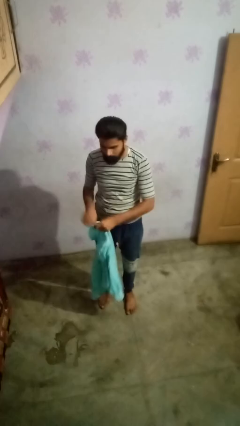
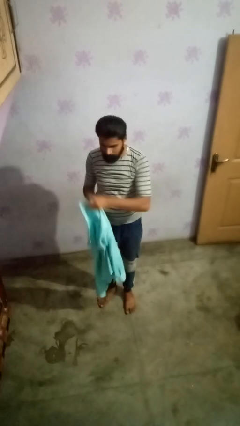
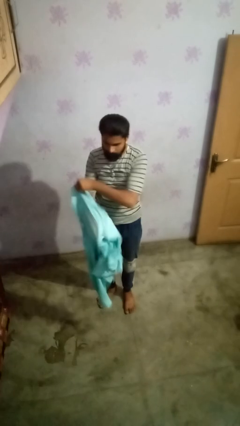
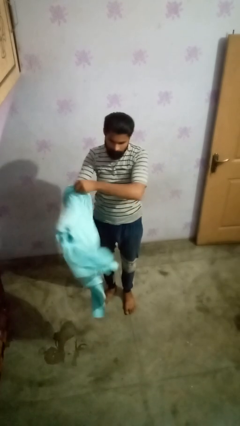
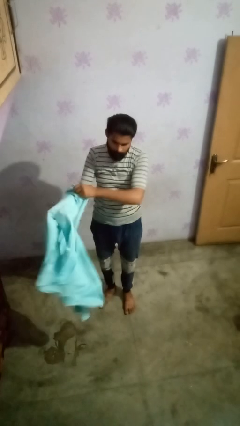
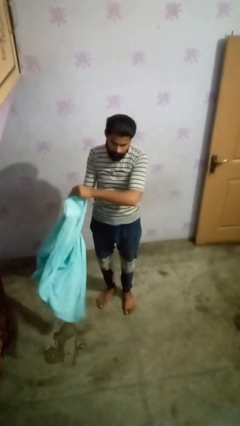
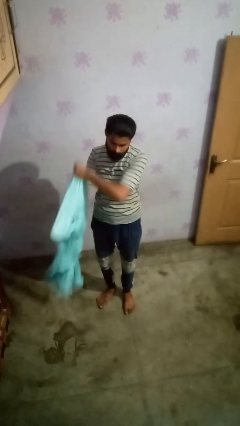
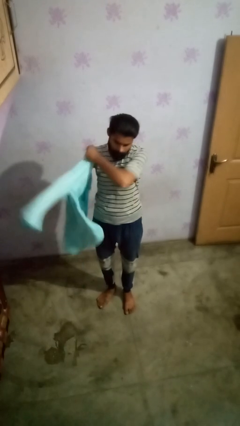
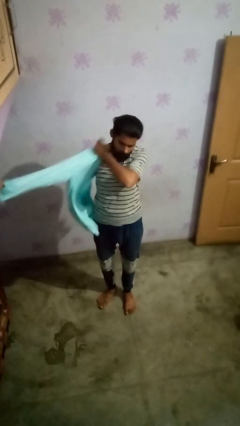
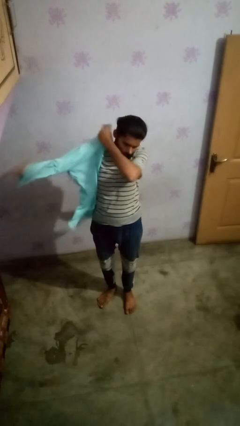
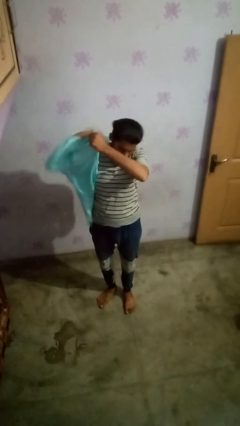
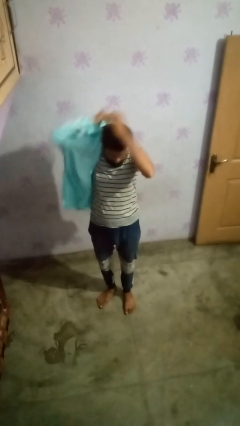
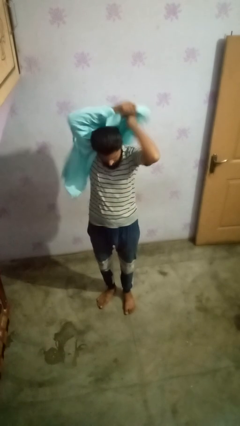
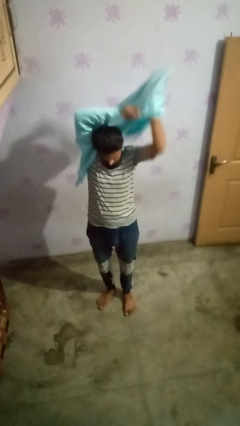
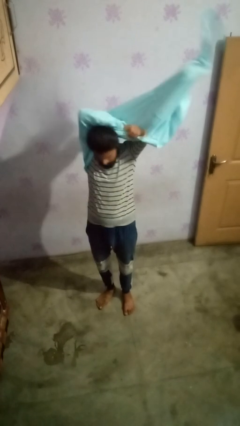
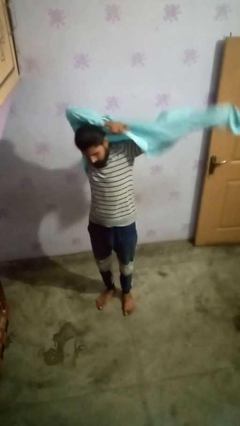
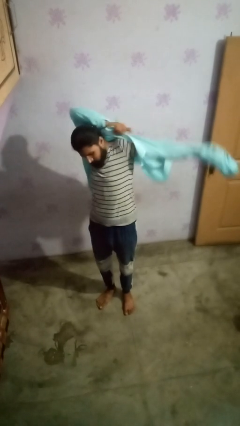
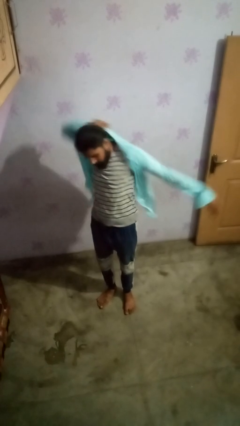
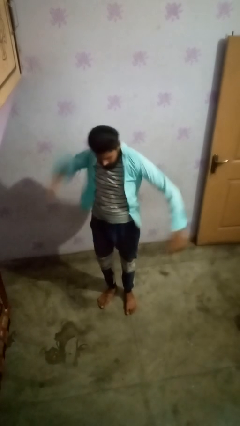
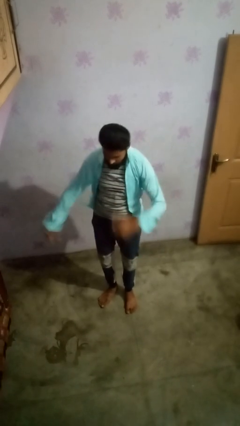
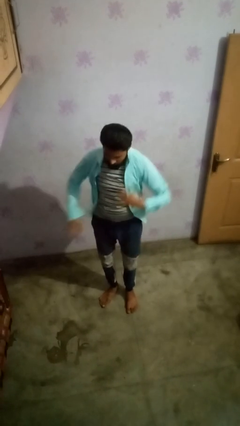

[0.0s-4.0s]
person puts on shirt

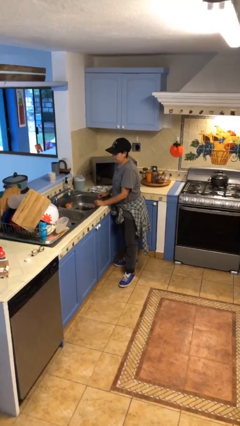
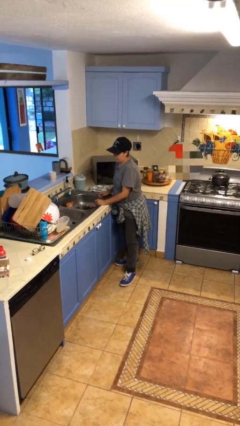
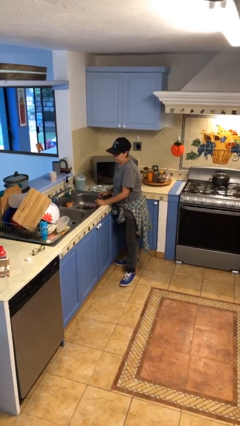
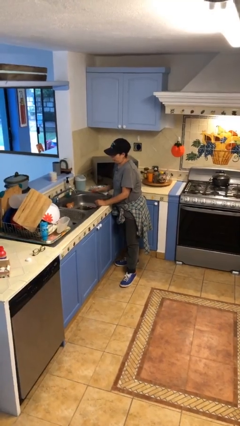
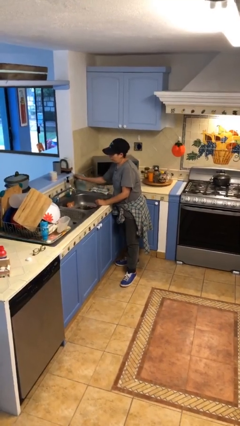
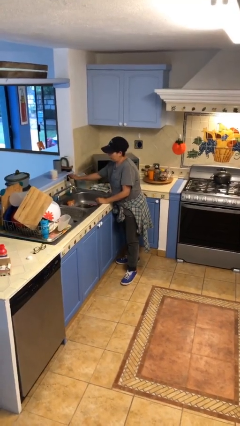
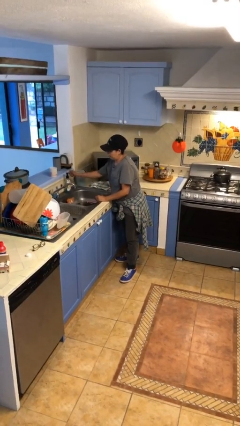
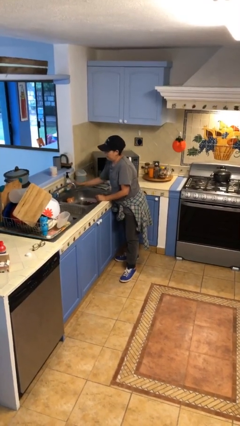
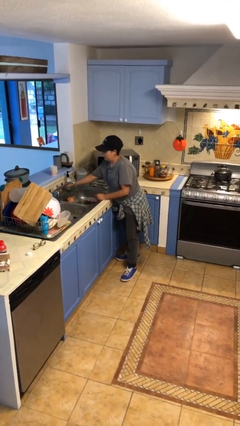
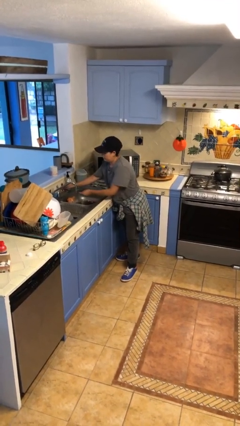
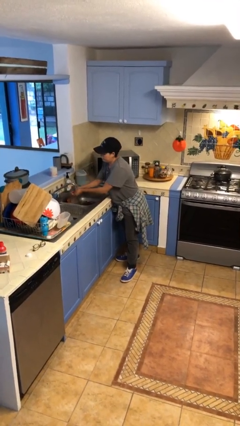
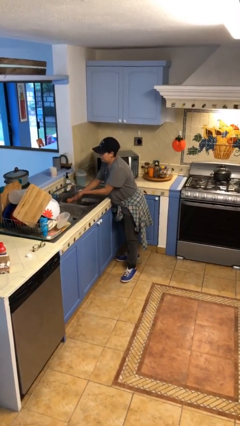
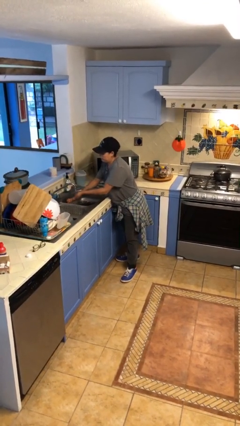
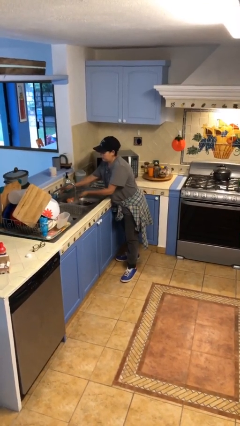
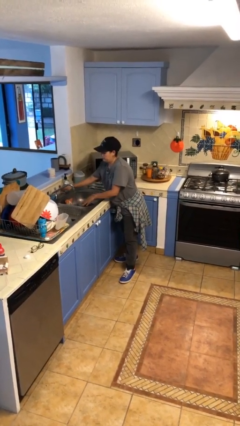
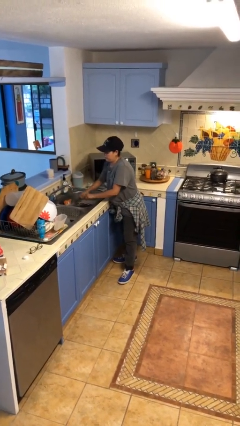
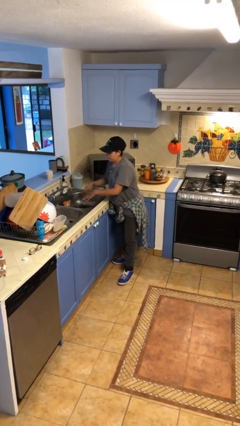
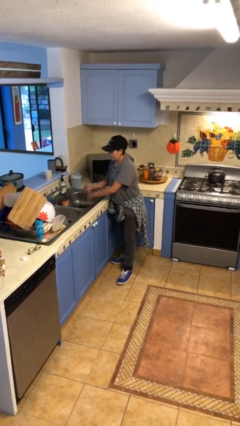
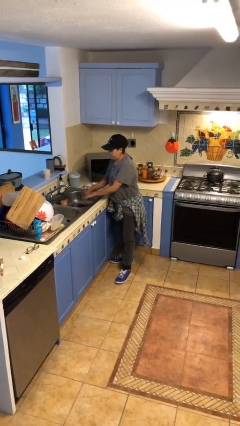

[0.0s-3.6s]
person washes hands

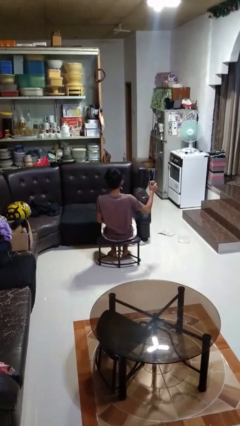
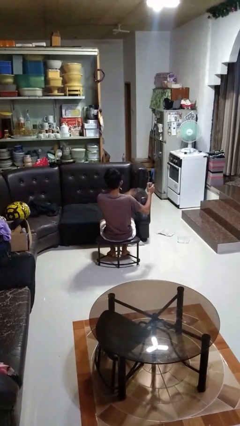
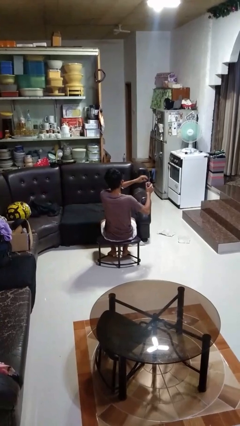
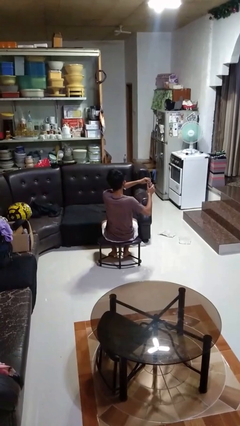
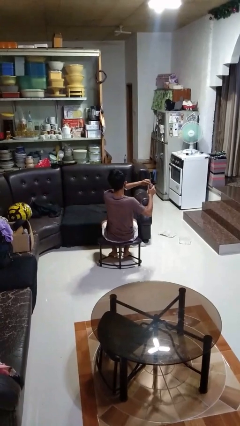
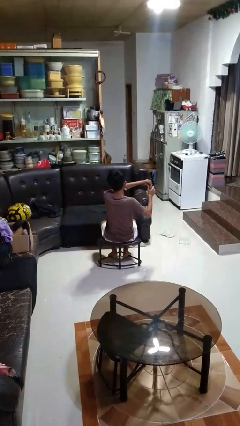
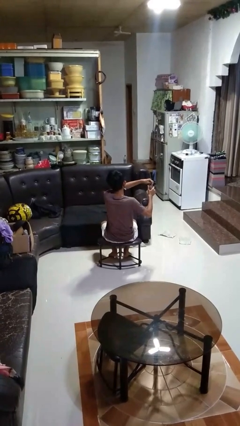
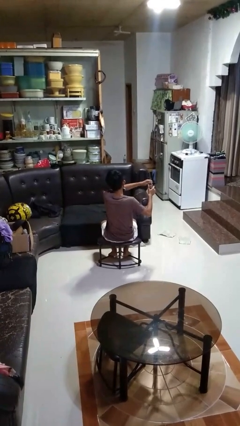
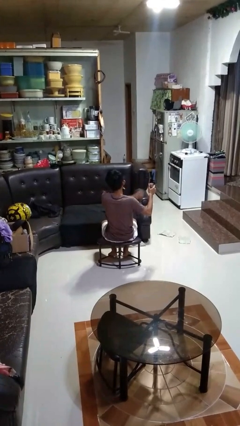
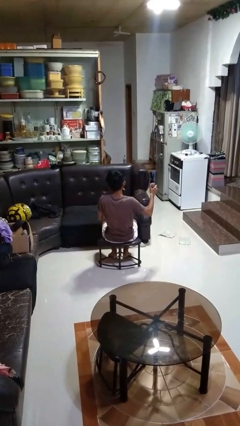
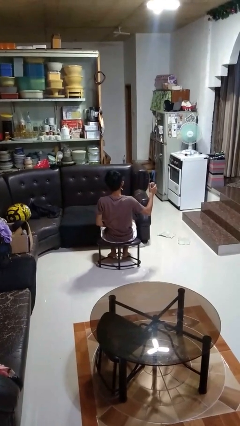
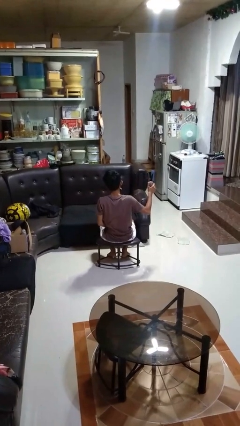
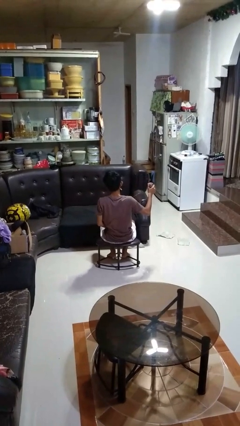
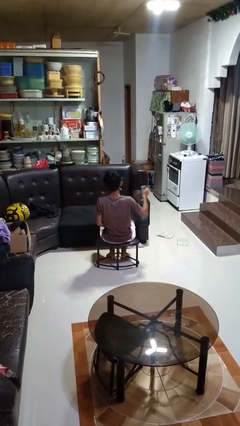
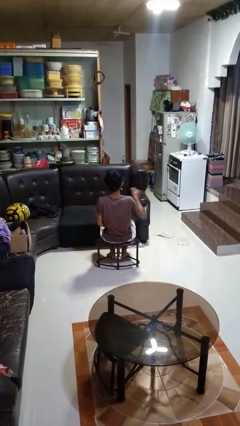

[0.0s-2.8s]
person opens beverage can

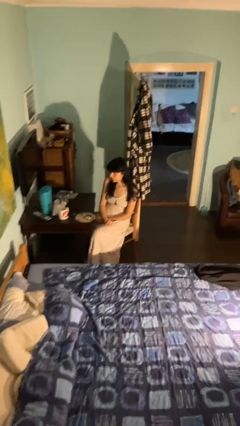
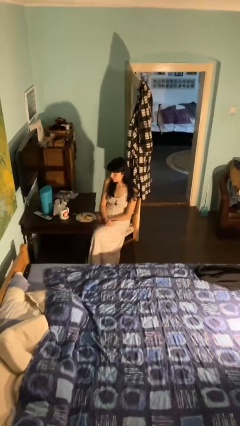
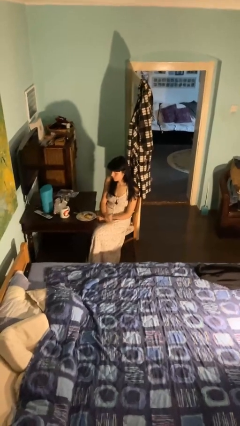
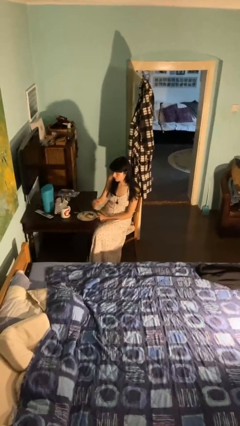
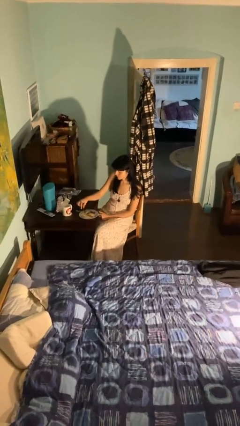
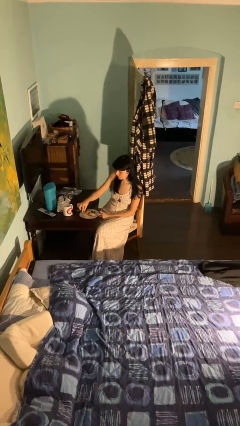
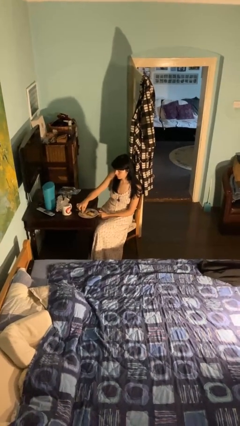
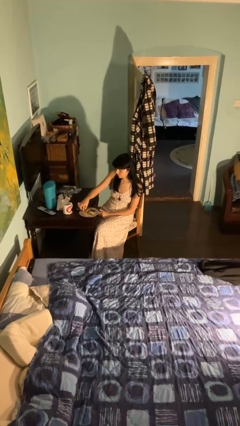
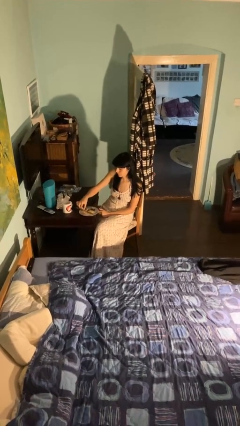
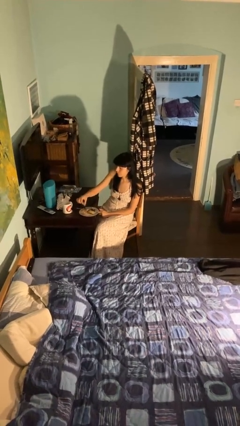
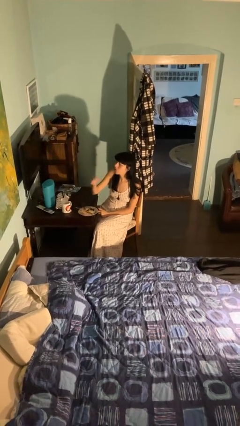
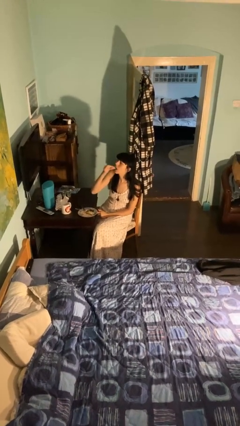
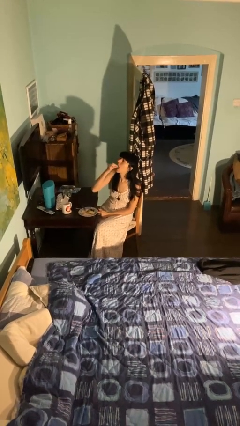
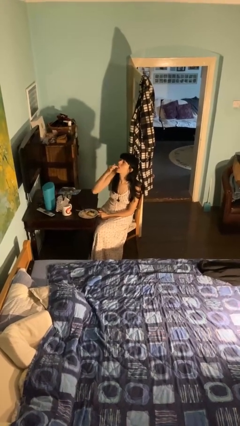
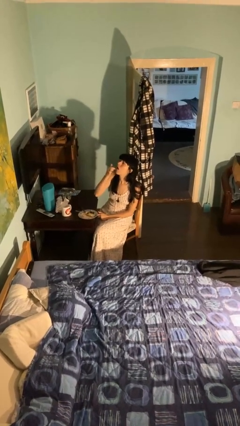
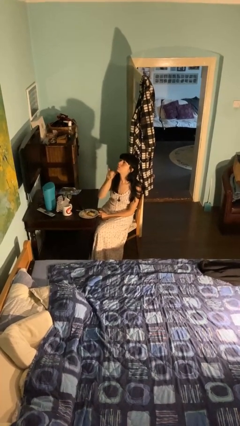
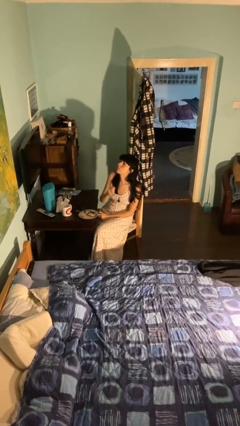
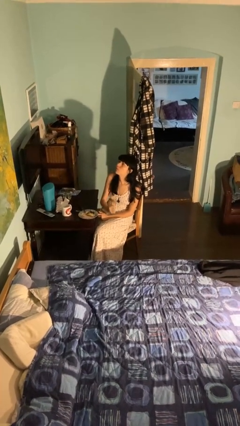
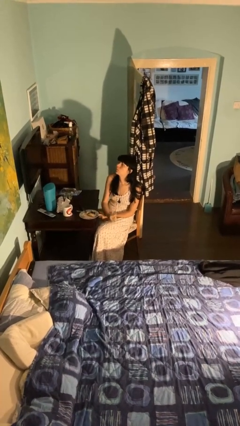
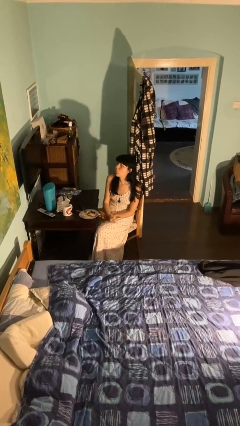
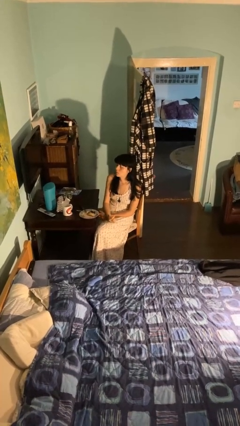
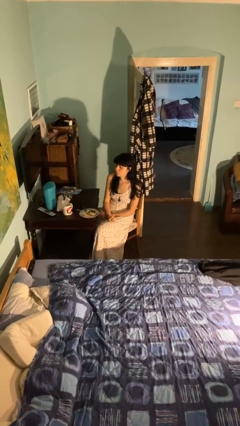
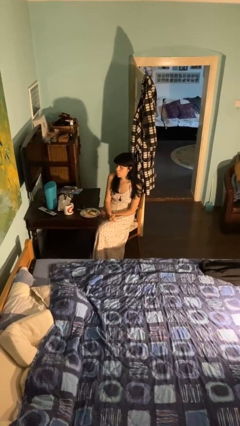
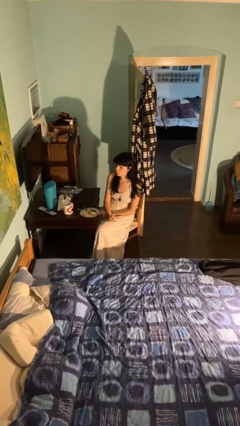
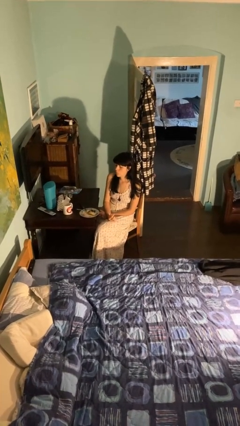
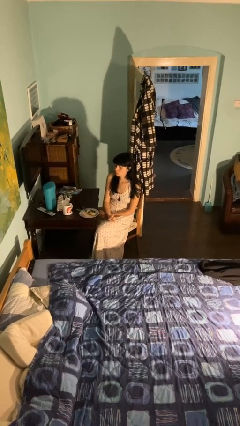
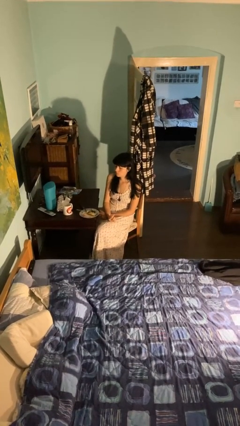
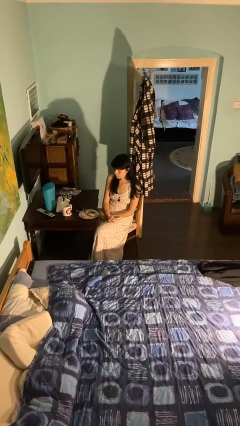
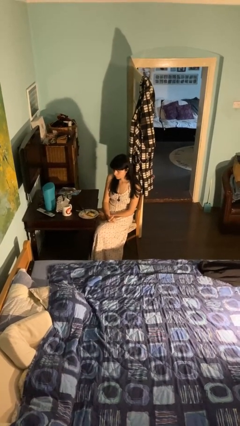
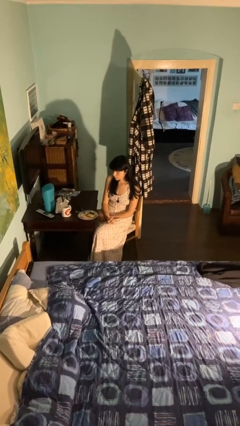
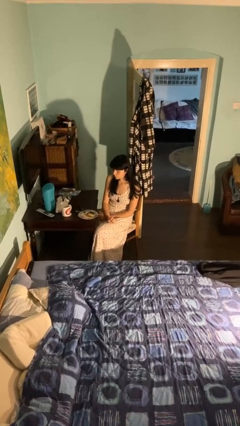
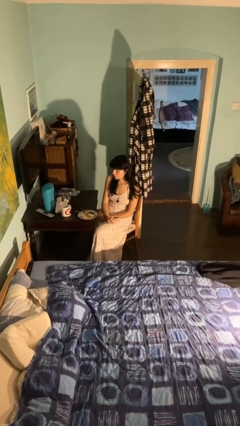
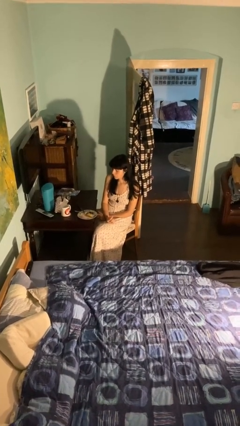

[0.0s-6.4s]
person eats with hands

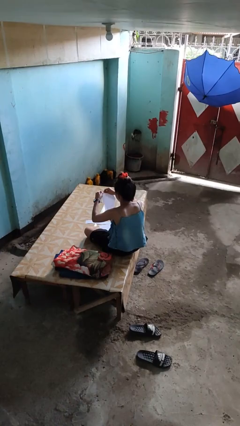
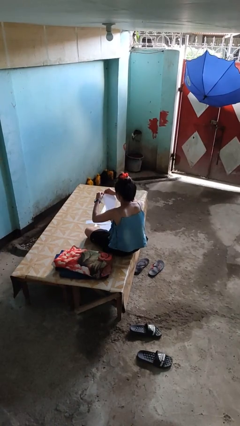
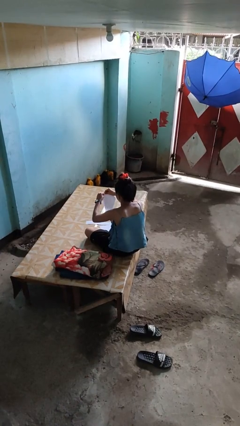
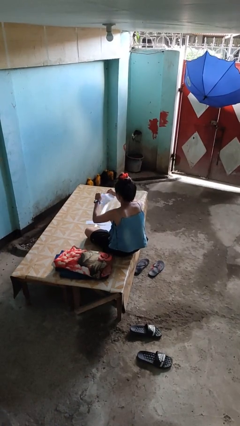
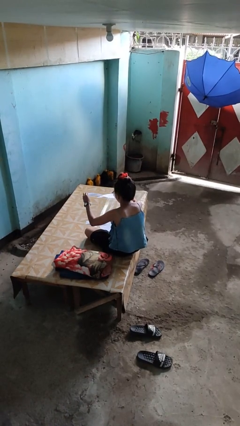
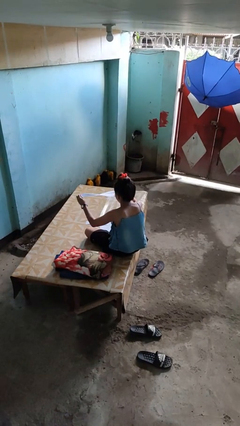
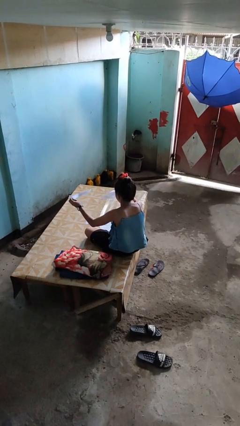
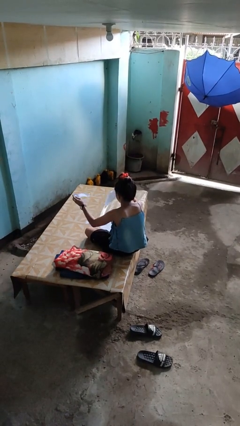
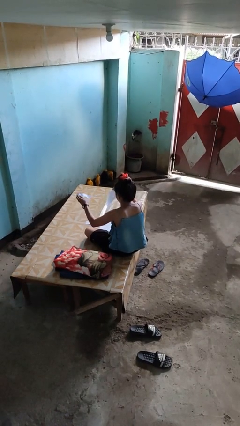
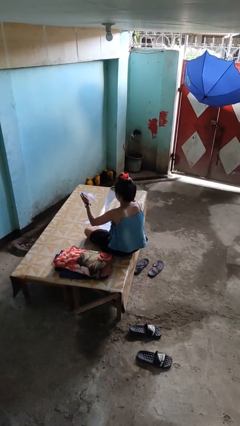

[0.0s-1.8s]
person tears paper
